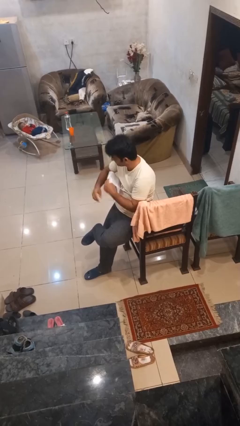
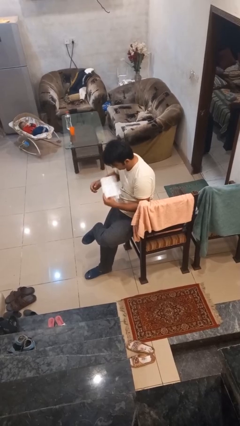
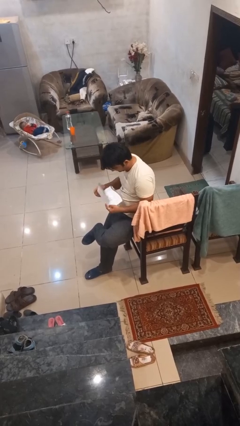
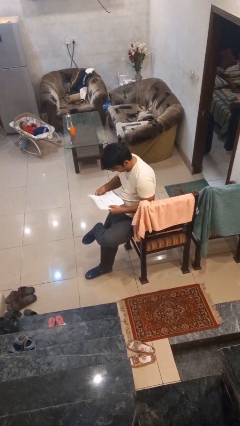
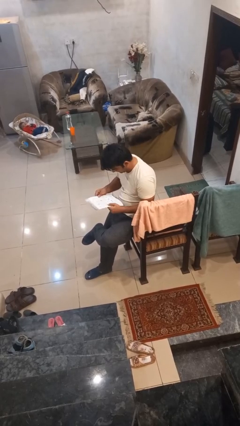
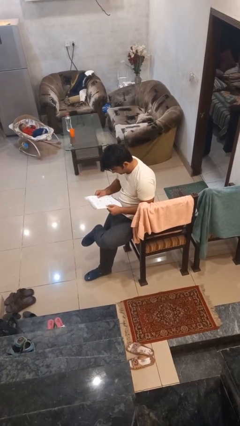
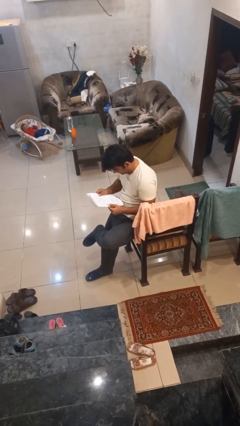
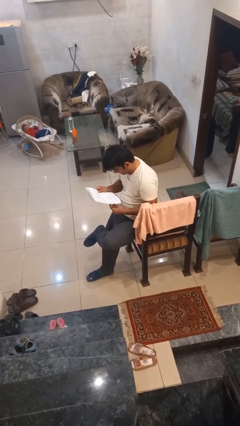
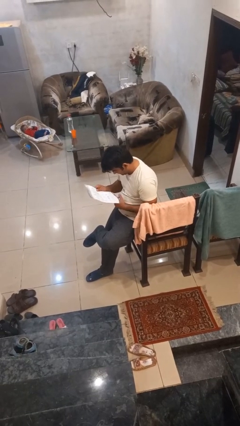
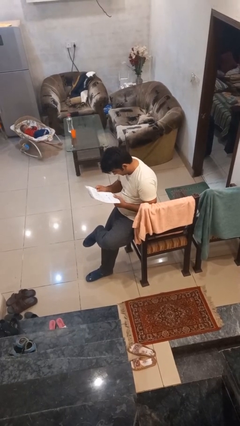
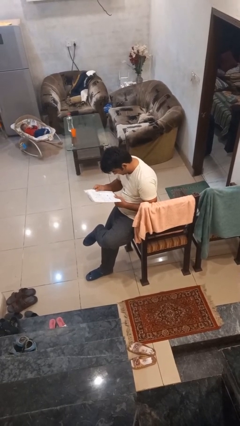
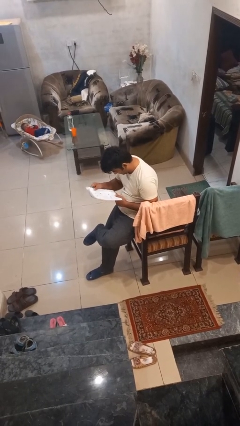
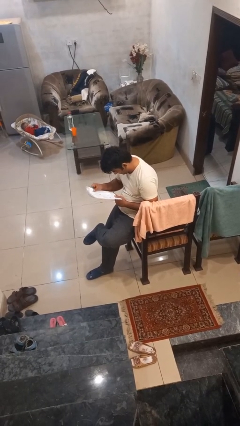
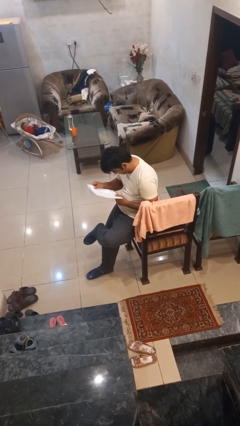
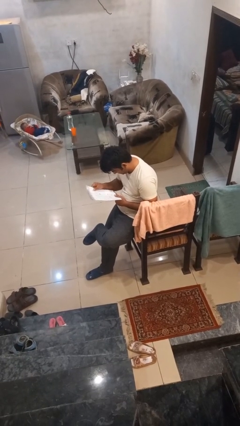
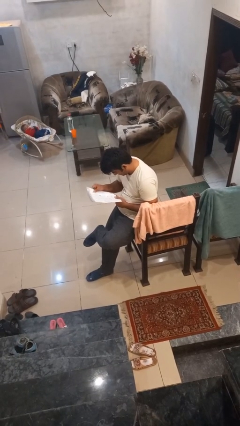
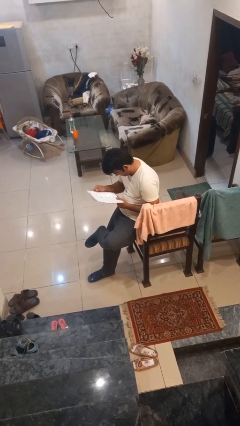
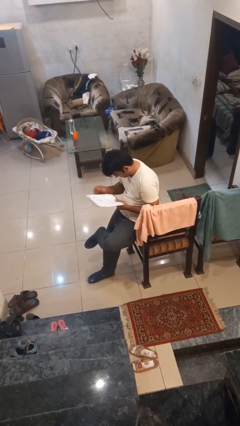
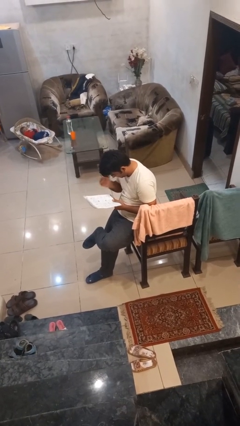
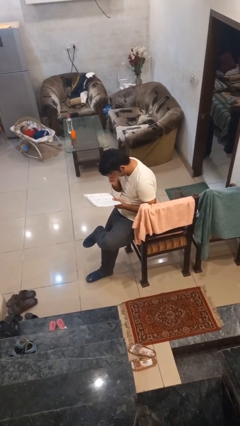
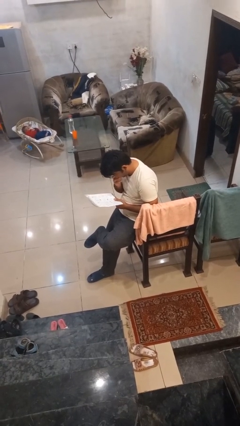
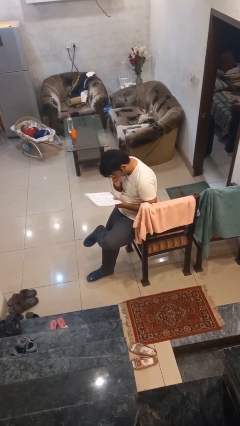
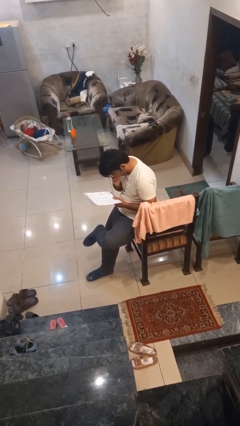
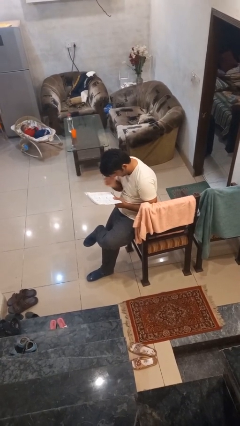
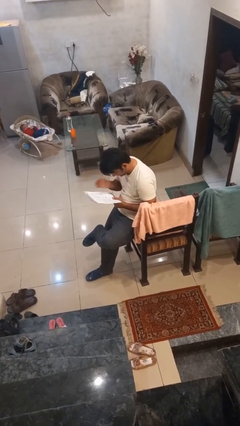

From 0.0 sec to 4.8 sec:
person reads document

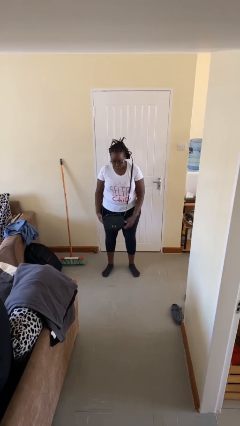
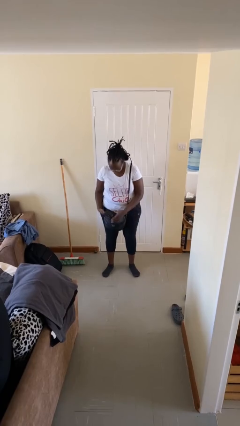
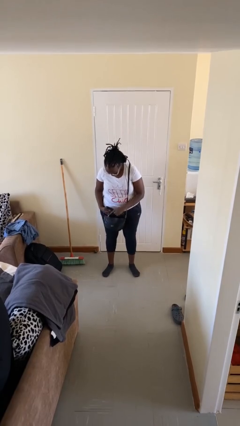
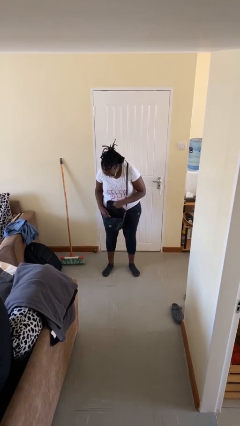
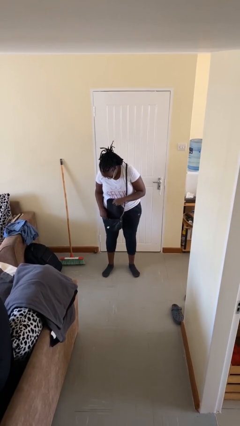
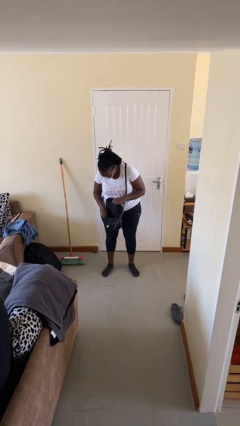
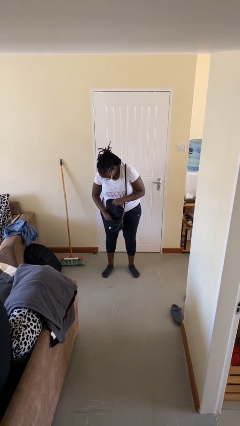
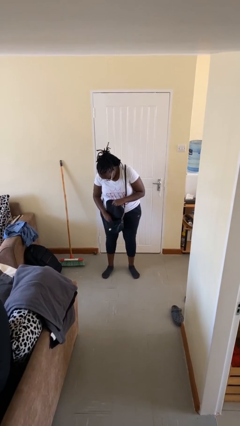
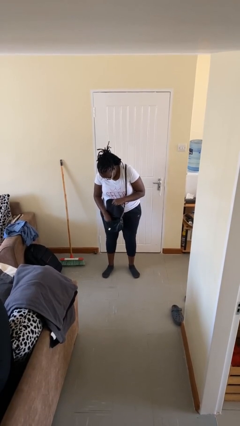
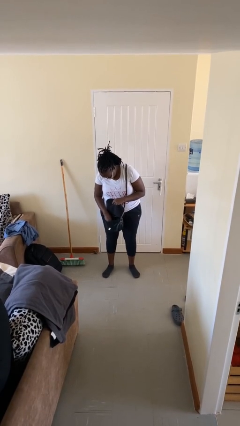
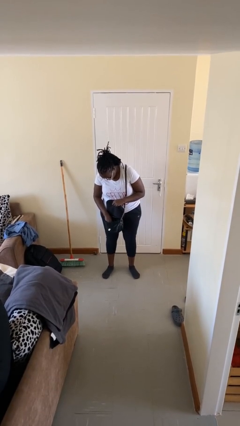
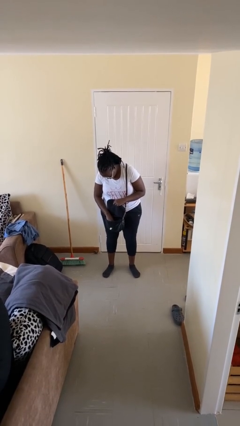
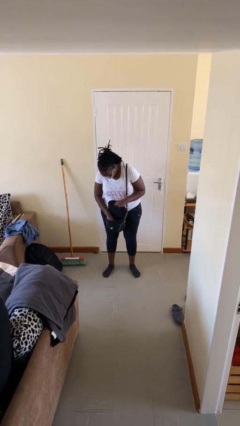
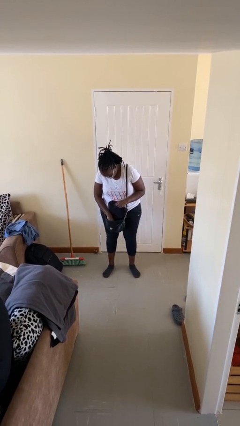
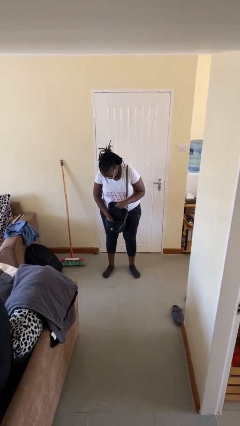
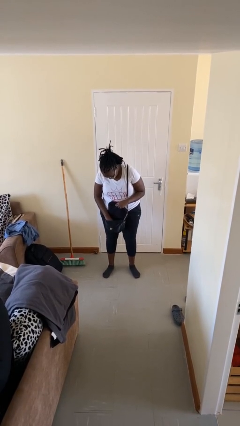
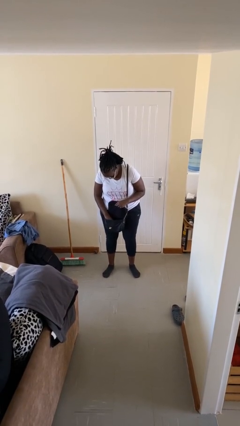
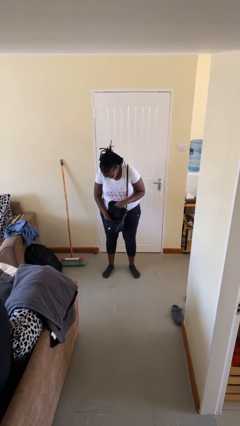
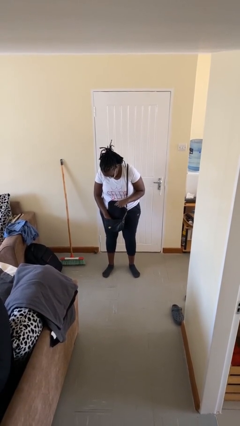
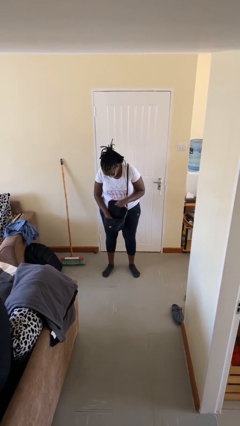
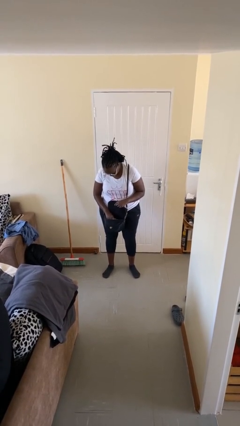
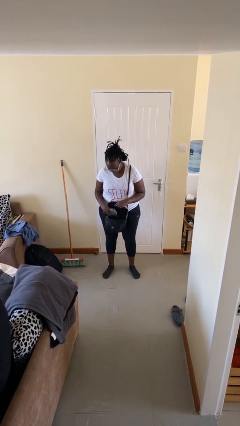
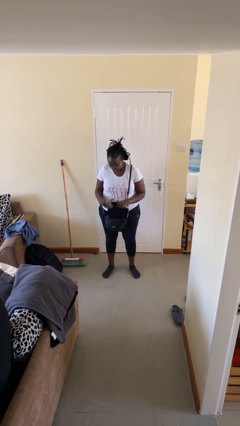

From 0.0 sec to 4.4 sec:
person searches in purse

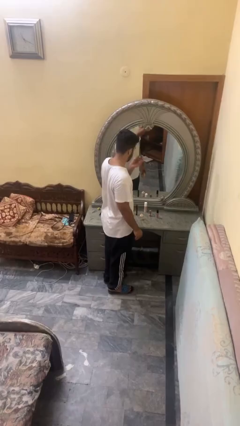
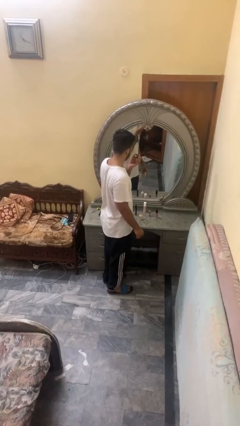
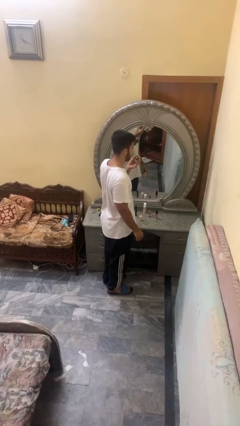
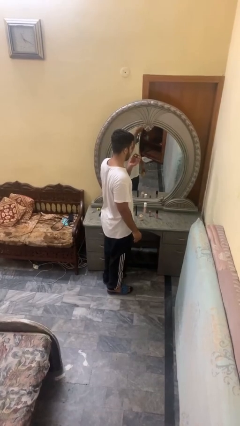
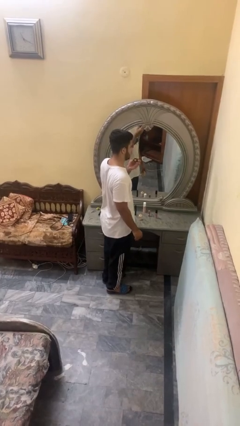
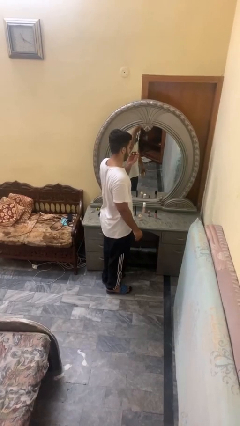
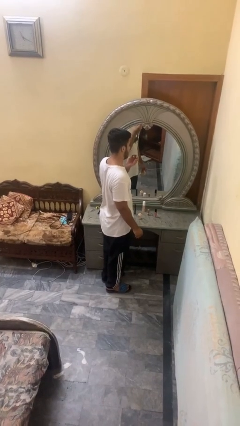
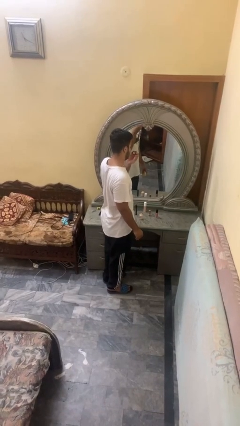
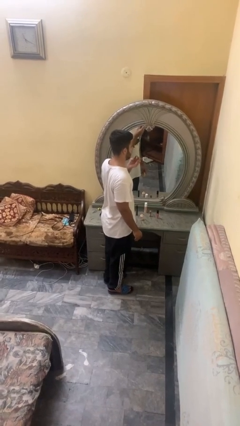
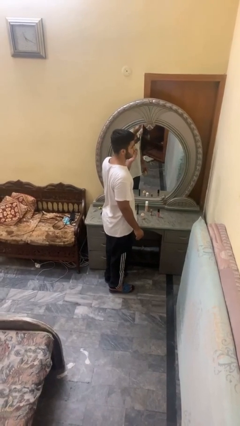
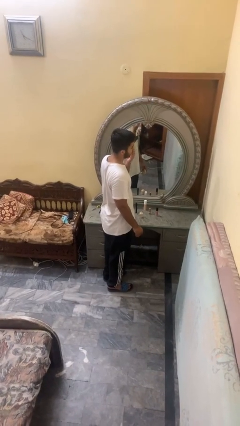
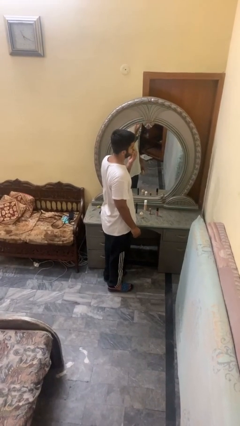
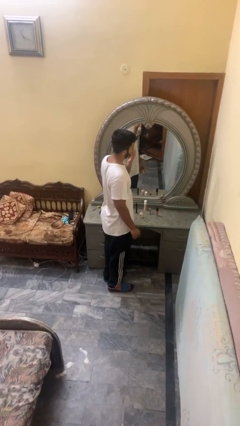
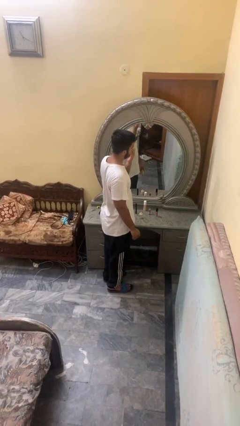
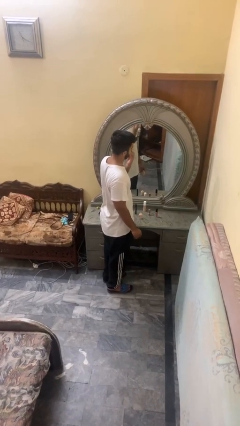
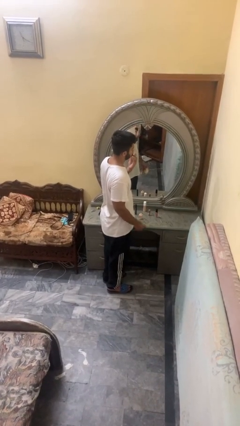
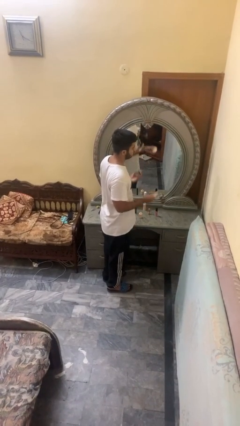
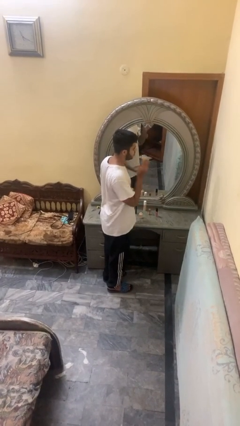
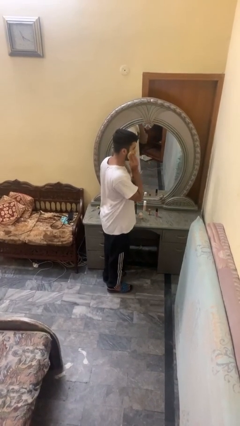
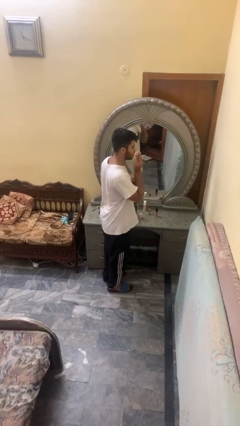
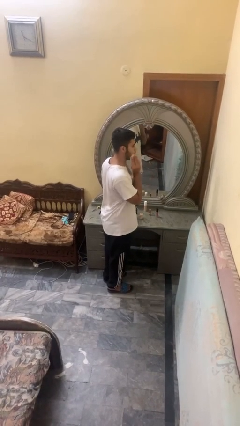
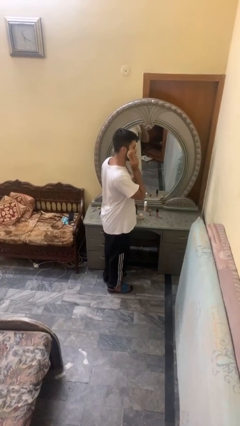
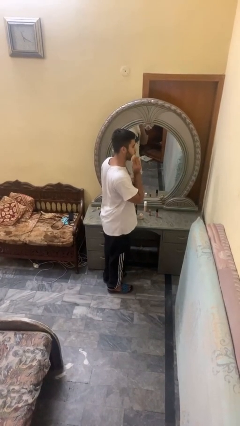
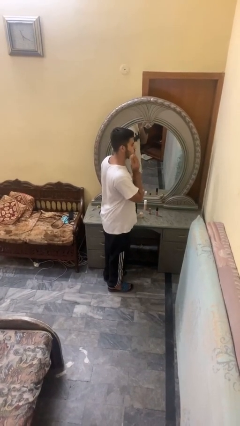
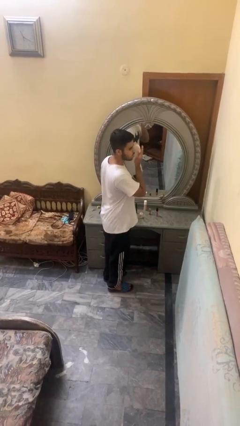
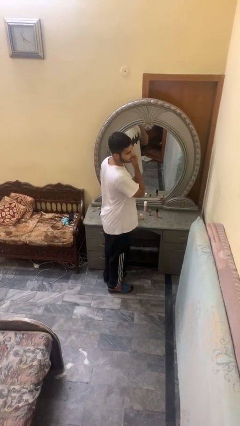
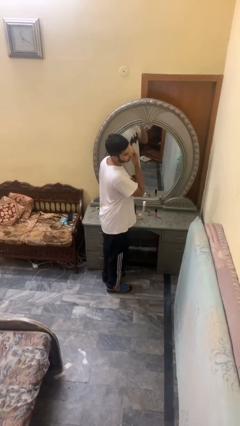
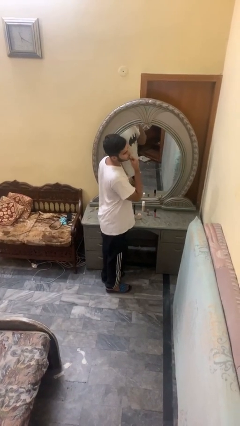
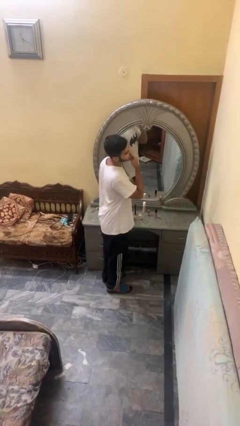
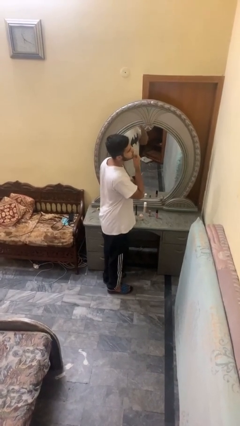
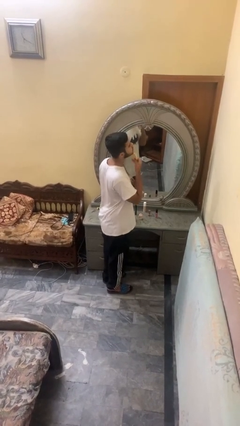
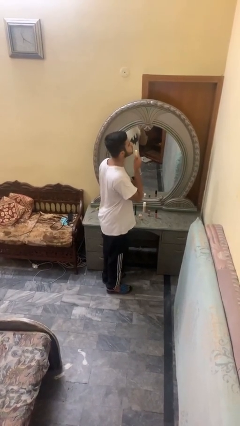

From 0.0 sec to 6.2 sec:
person applies foundation makeup

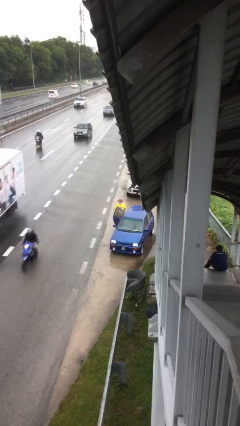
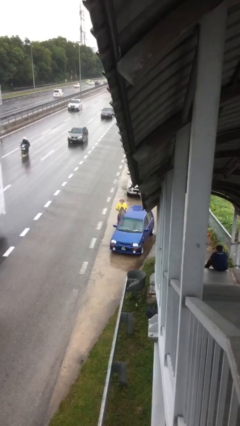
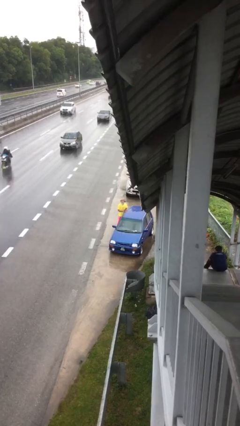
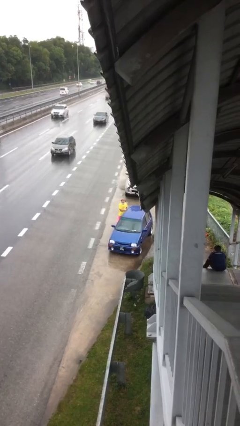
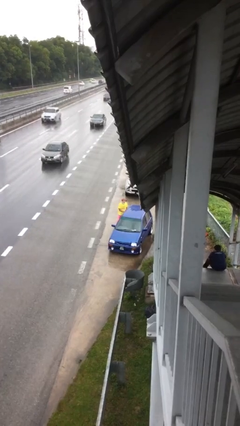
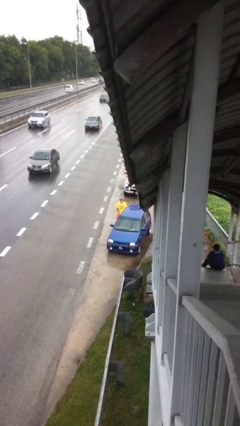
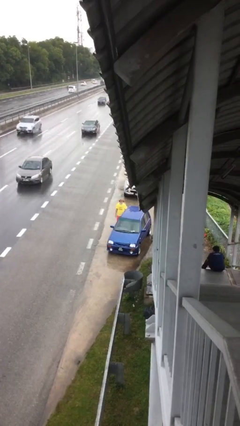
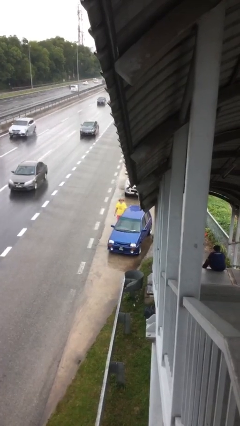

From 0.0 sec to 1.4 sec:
person closes car door

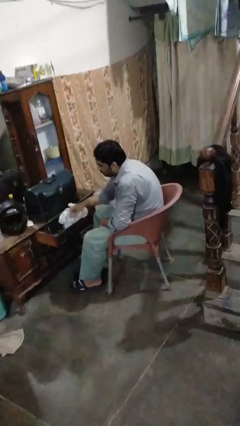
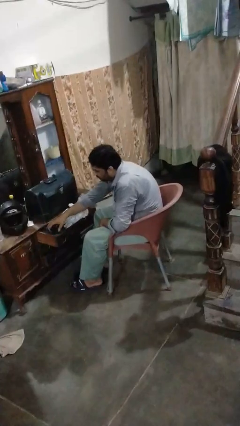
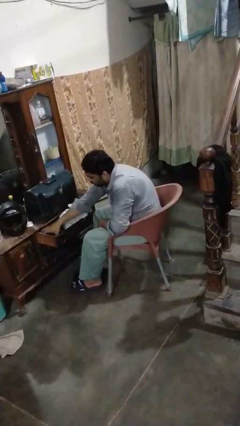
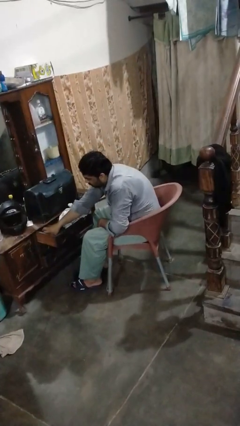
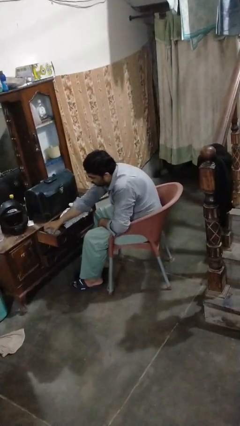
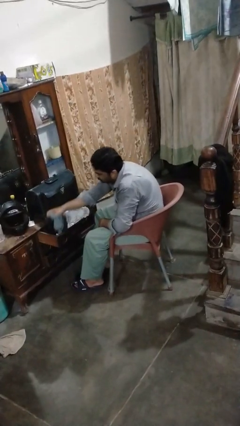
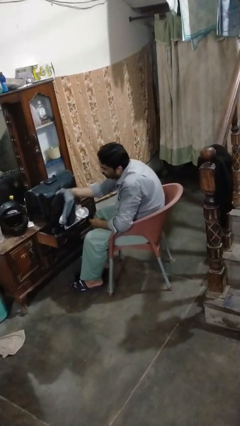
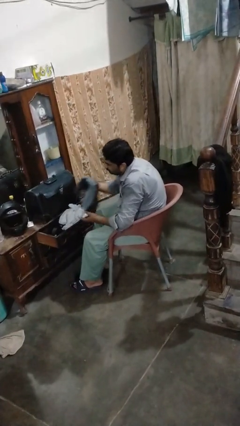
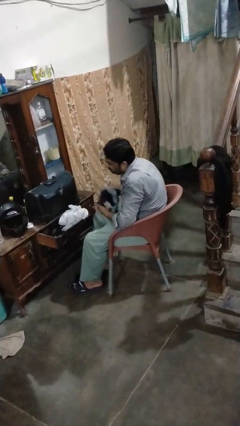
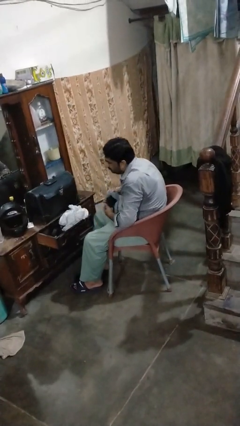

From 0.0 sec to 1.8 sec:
person takes clothes from dresser
